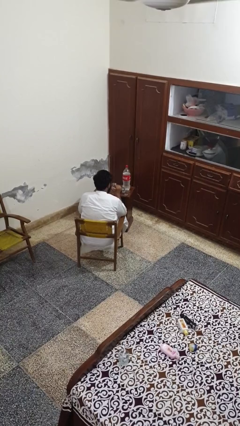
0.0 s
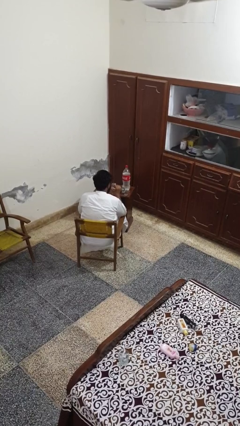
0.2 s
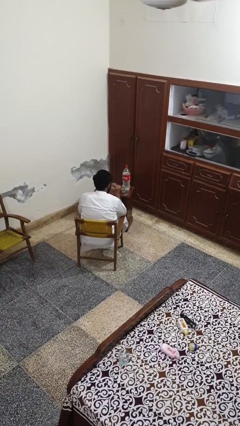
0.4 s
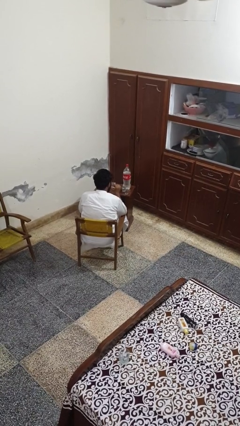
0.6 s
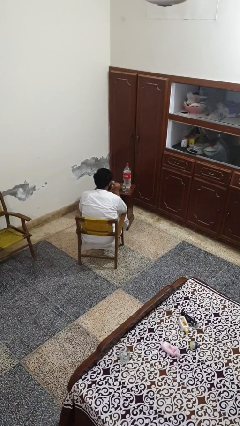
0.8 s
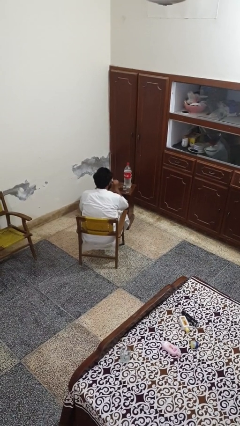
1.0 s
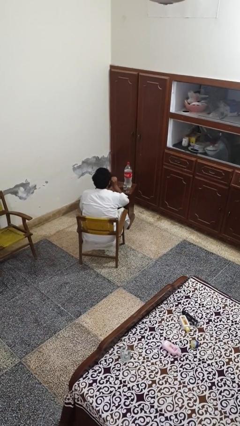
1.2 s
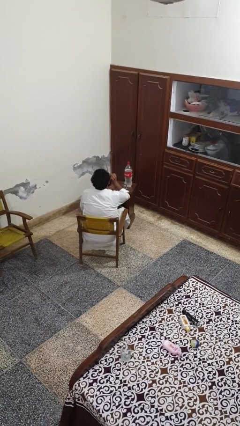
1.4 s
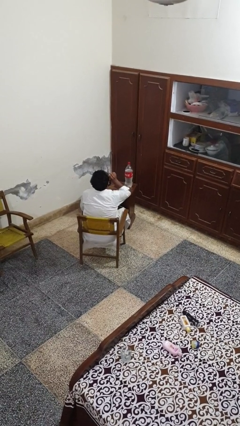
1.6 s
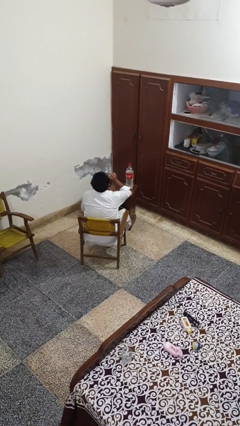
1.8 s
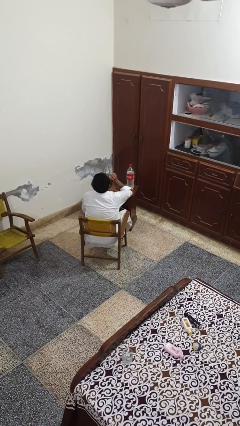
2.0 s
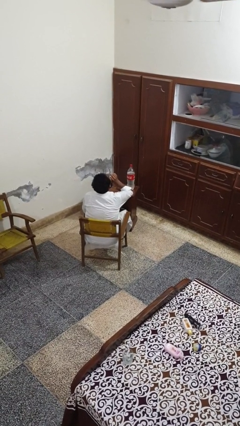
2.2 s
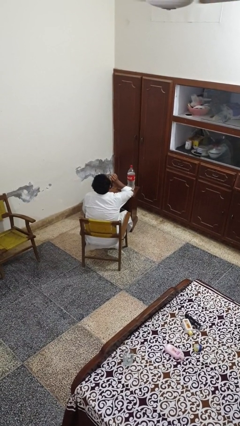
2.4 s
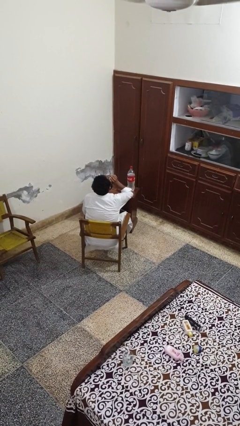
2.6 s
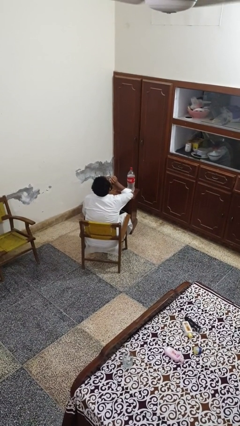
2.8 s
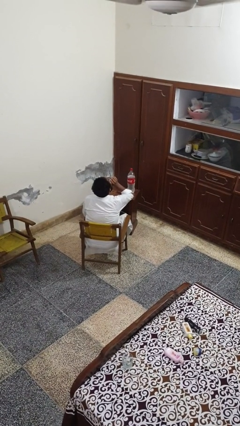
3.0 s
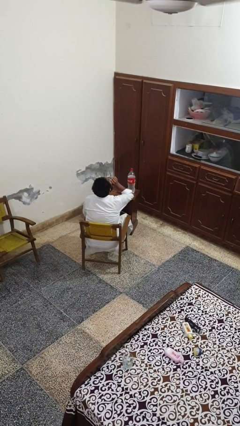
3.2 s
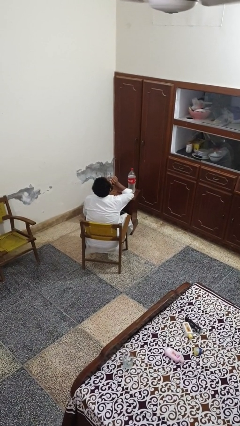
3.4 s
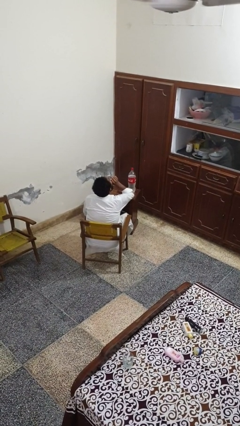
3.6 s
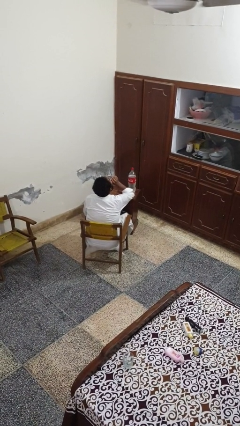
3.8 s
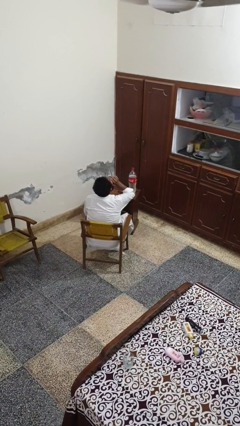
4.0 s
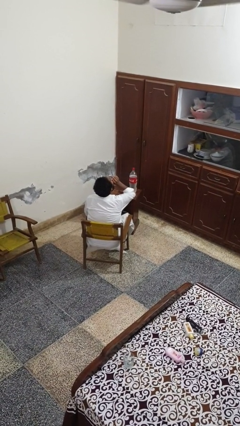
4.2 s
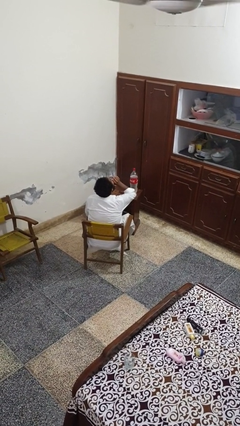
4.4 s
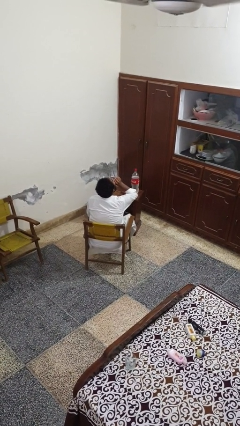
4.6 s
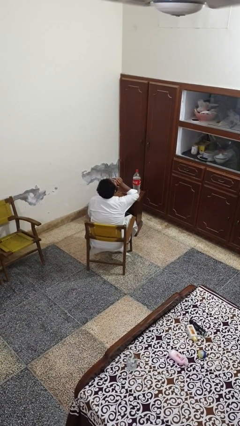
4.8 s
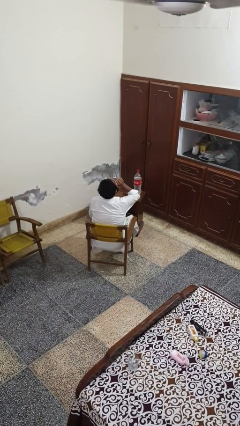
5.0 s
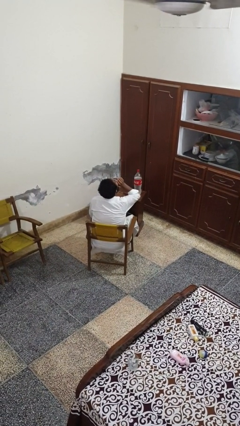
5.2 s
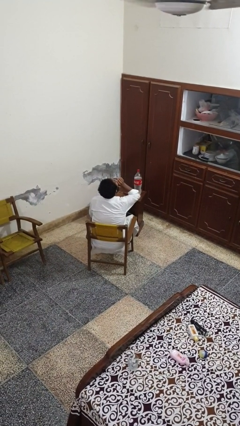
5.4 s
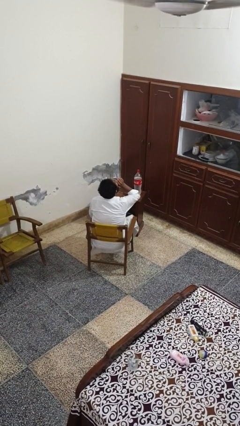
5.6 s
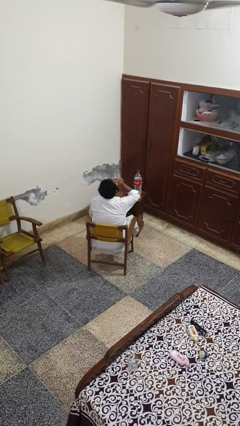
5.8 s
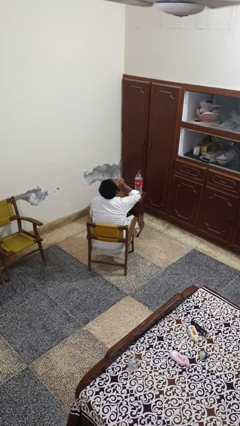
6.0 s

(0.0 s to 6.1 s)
person drinks from shotglass

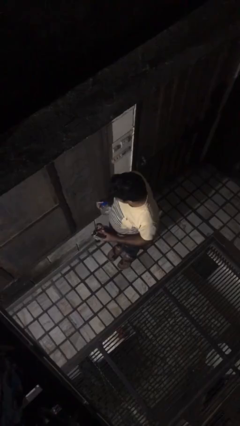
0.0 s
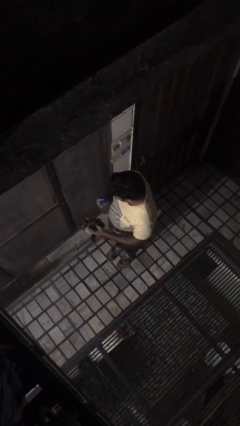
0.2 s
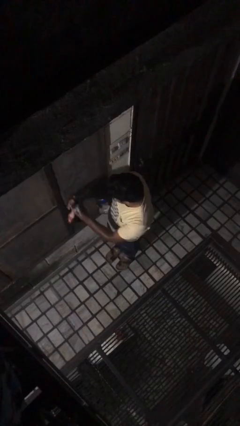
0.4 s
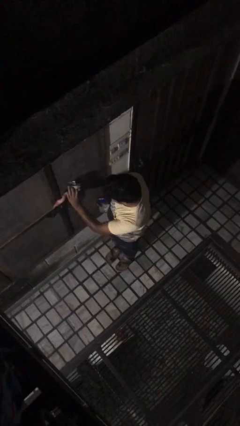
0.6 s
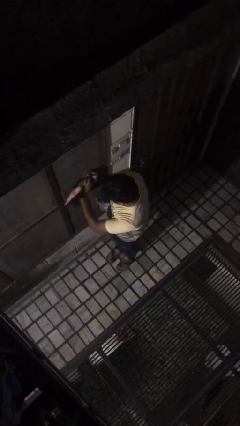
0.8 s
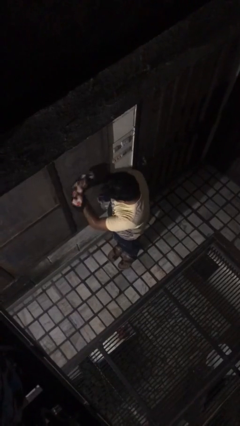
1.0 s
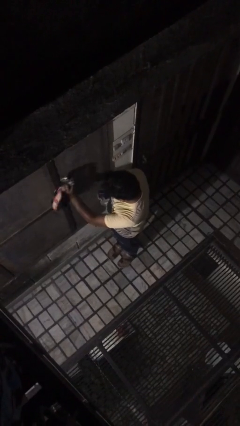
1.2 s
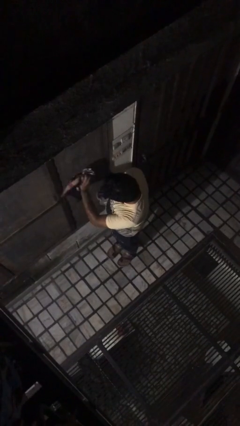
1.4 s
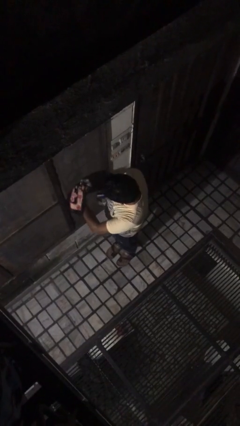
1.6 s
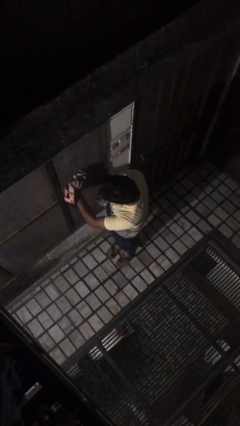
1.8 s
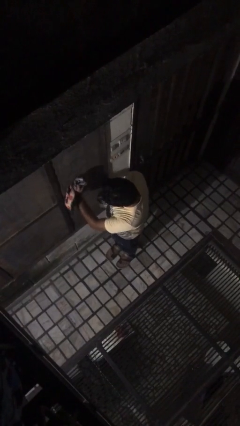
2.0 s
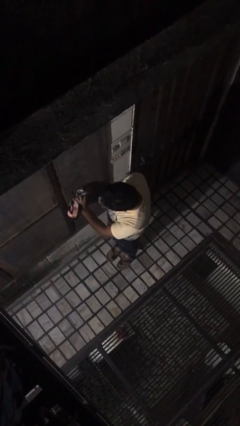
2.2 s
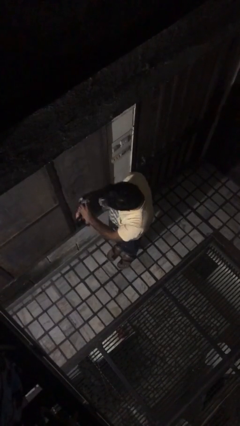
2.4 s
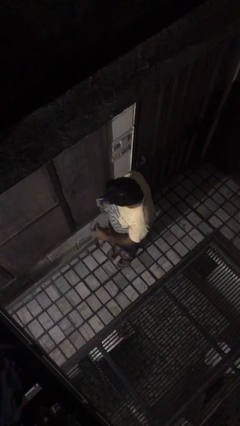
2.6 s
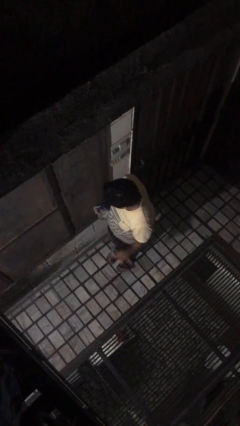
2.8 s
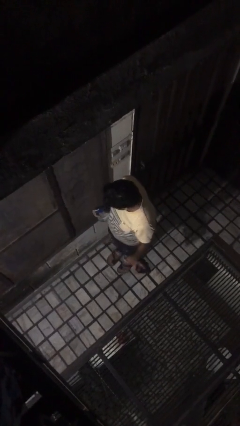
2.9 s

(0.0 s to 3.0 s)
person washes window

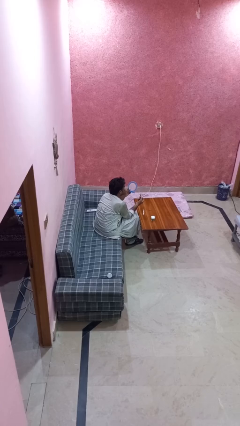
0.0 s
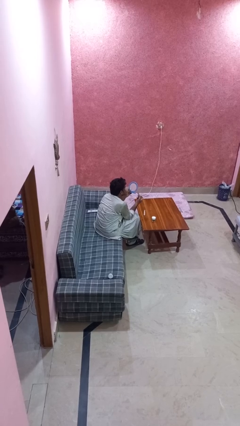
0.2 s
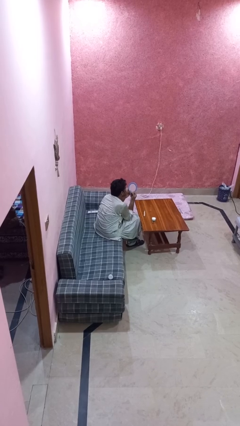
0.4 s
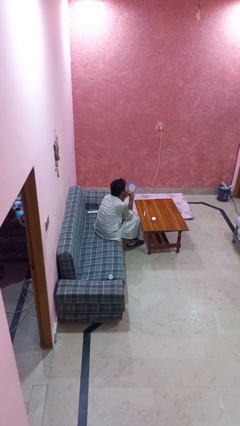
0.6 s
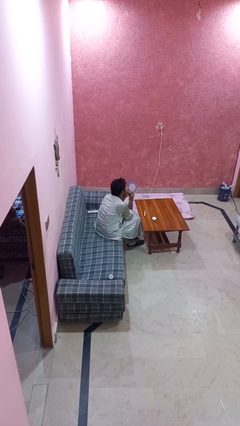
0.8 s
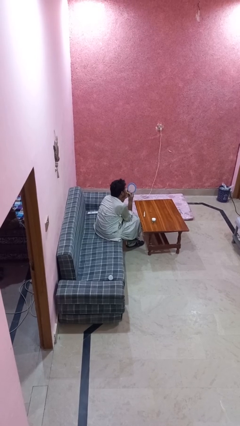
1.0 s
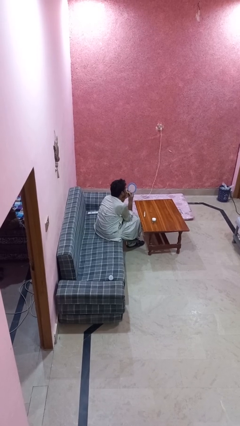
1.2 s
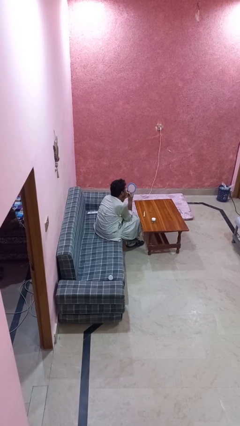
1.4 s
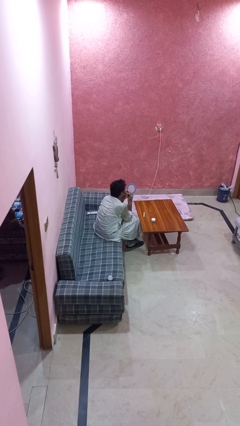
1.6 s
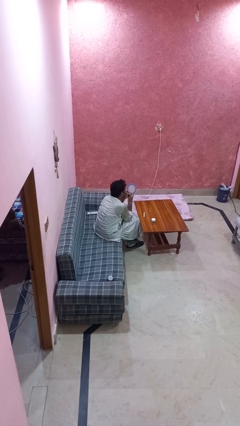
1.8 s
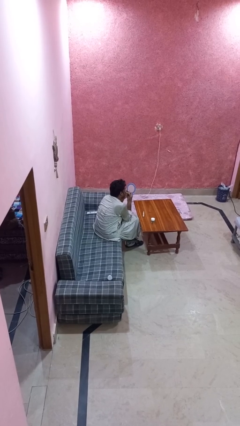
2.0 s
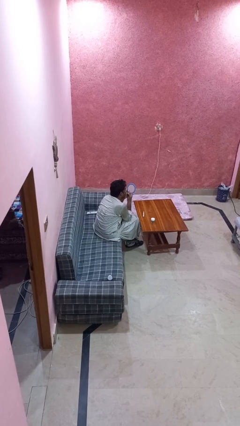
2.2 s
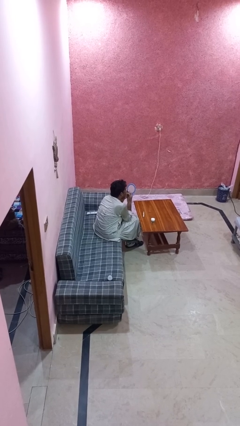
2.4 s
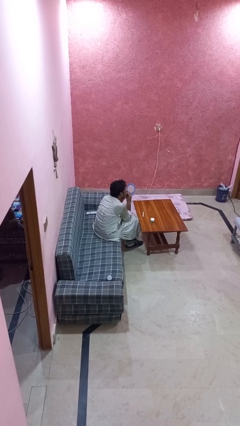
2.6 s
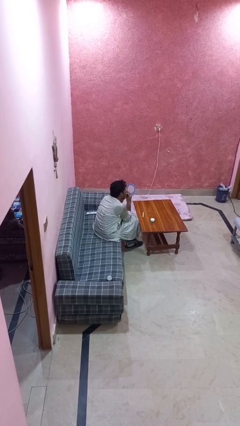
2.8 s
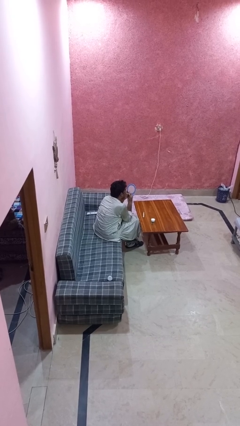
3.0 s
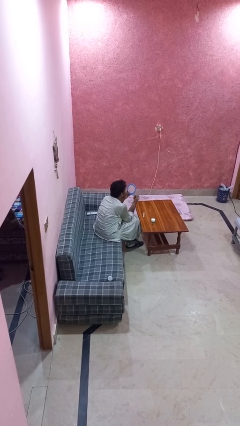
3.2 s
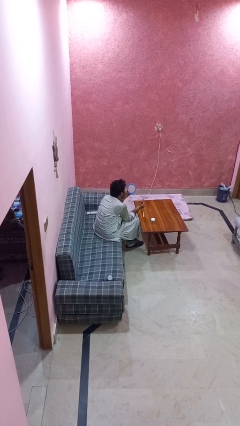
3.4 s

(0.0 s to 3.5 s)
person applies lip makeup

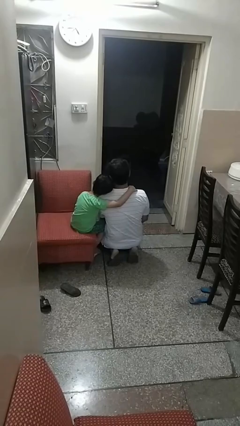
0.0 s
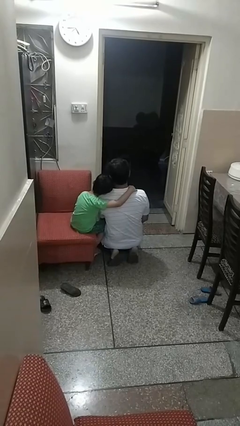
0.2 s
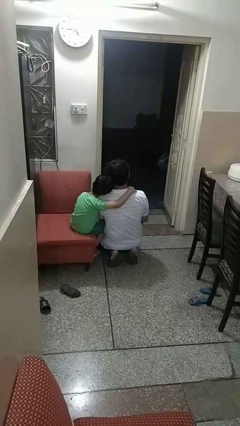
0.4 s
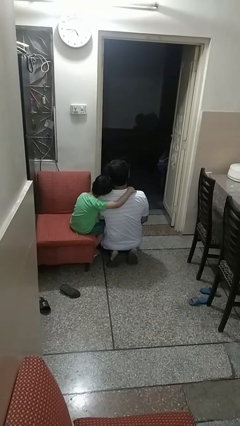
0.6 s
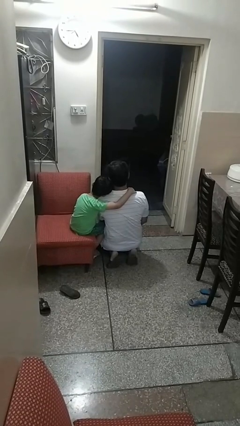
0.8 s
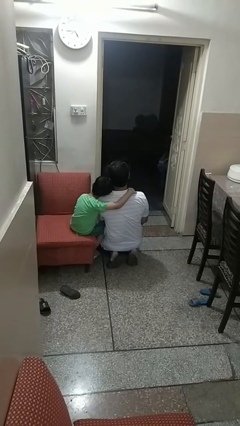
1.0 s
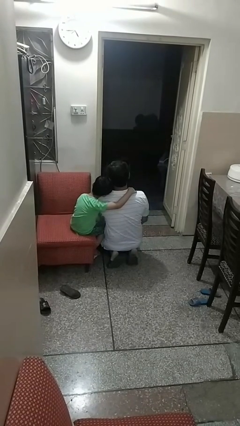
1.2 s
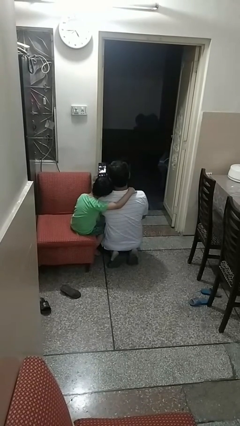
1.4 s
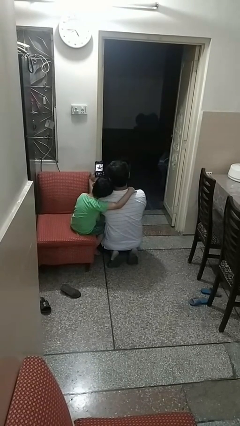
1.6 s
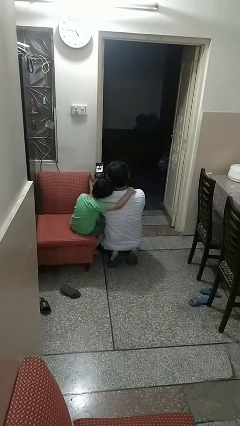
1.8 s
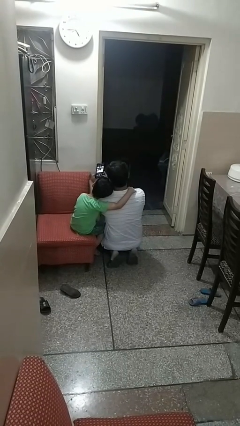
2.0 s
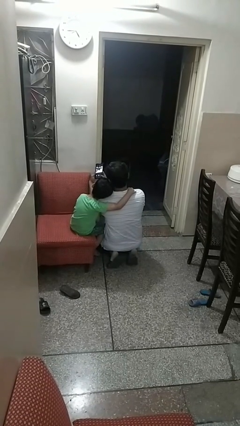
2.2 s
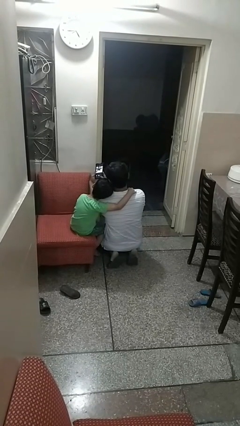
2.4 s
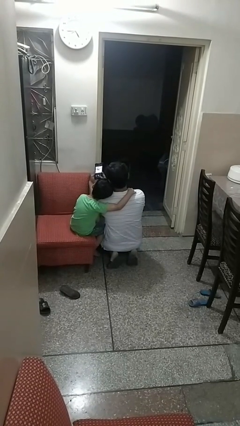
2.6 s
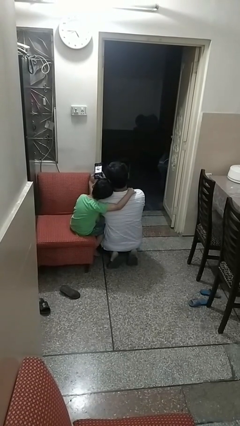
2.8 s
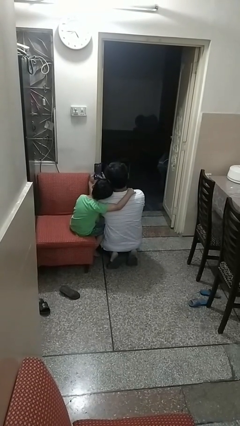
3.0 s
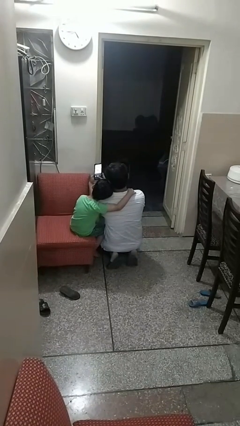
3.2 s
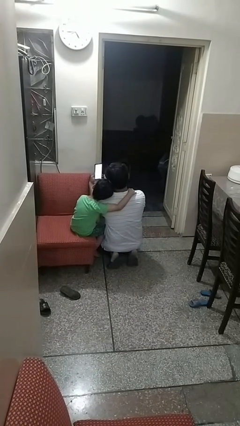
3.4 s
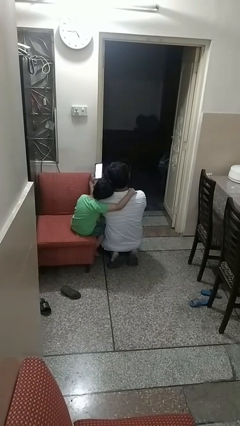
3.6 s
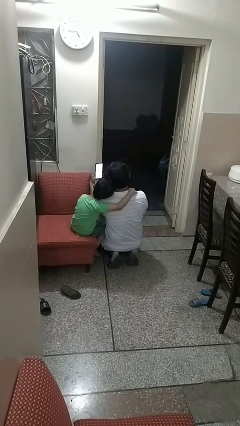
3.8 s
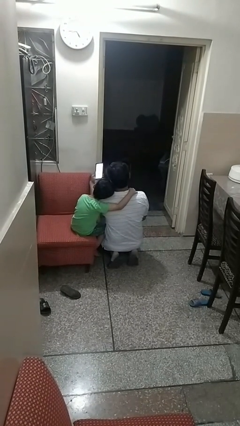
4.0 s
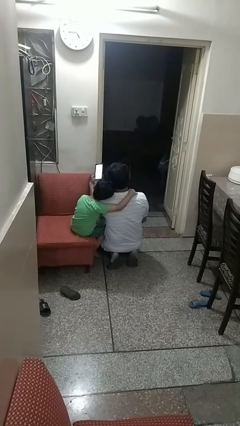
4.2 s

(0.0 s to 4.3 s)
person takes selfie with person

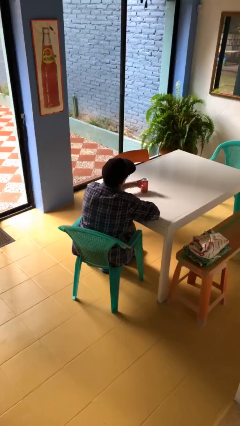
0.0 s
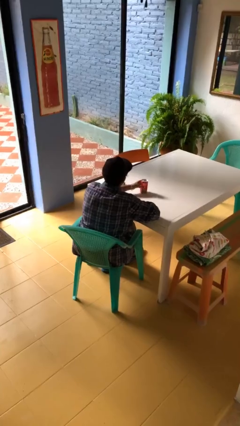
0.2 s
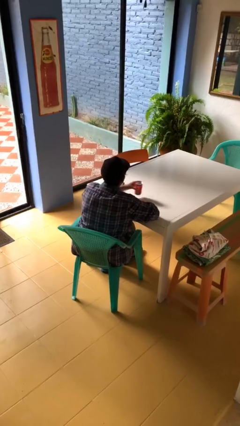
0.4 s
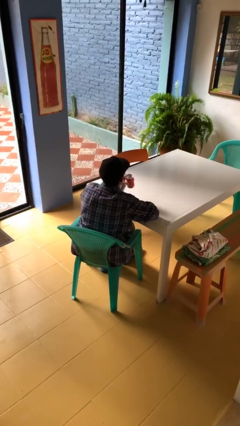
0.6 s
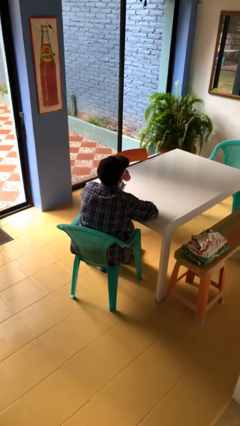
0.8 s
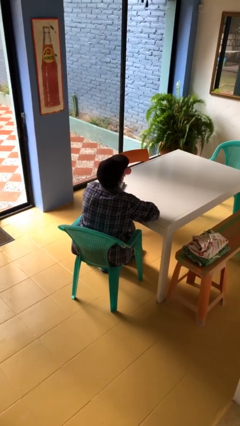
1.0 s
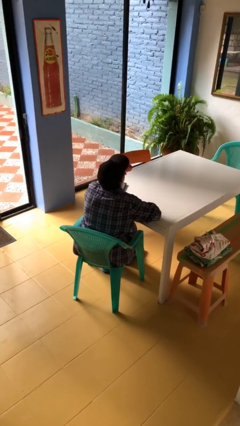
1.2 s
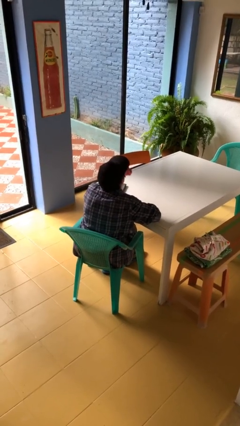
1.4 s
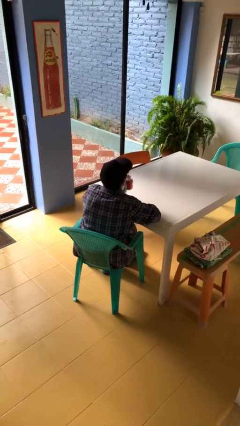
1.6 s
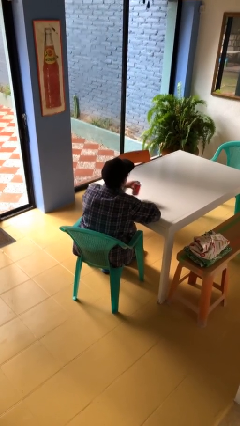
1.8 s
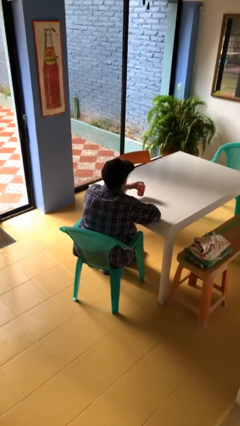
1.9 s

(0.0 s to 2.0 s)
person drinks from beverage can
